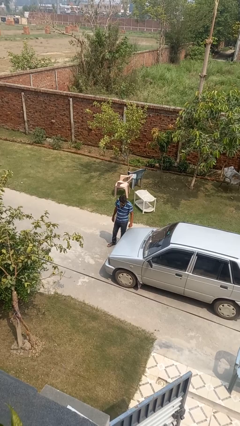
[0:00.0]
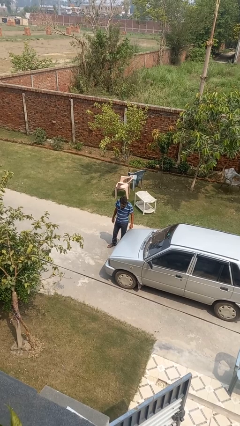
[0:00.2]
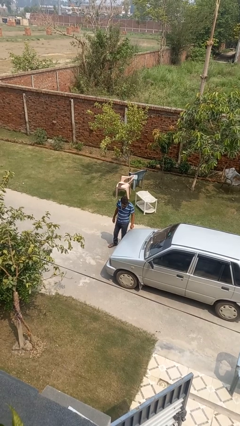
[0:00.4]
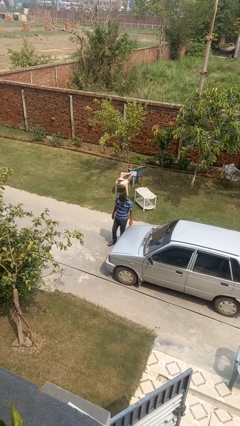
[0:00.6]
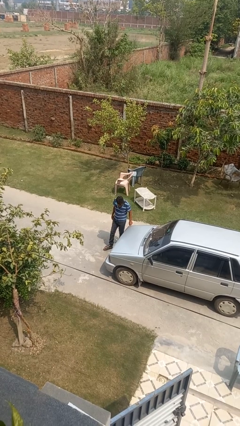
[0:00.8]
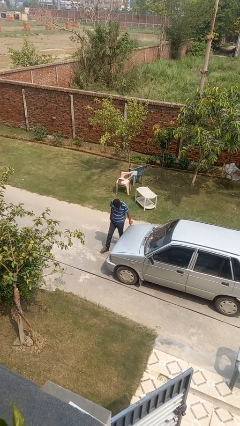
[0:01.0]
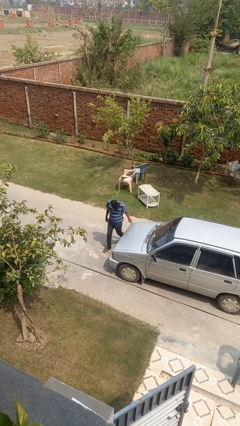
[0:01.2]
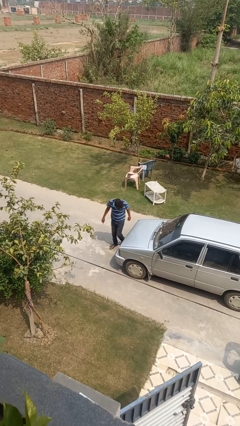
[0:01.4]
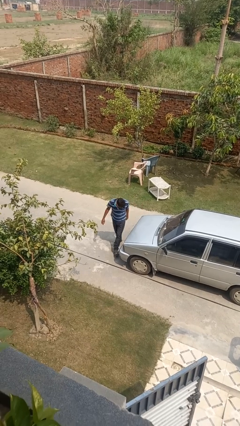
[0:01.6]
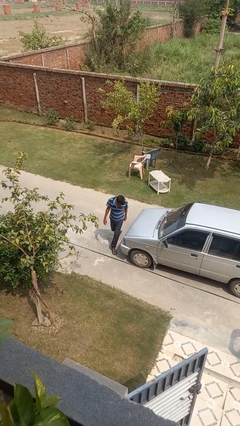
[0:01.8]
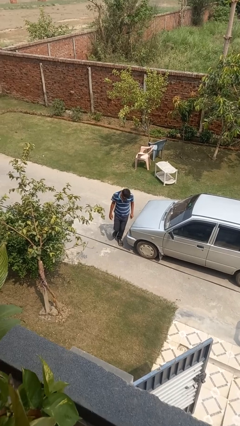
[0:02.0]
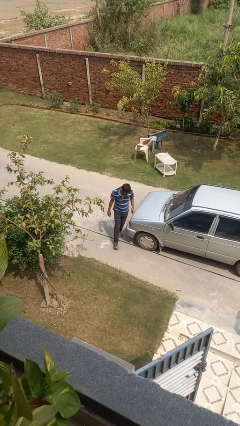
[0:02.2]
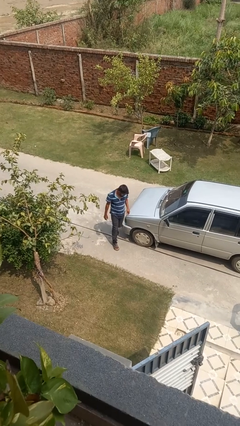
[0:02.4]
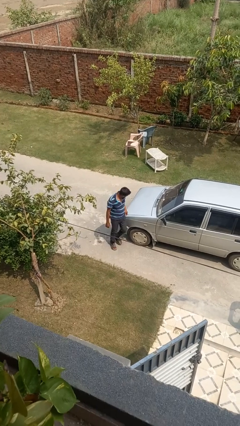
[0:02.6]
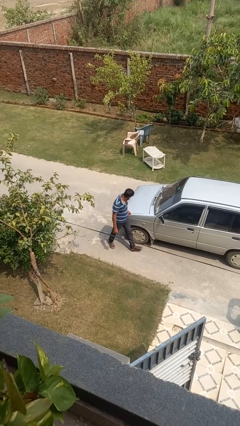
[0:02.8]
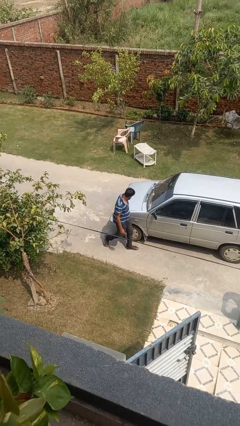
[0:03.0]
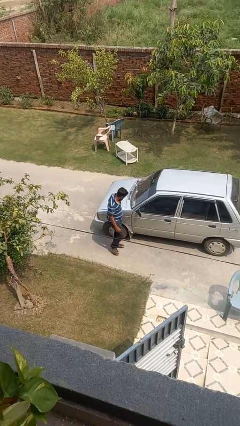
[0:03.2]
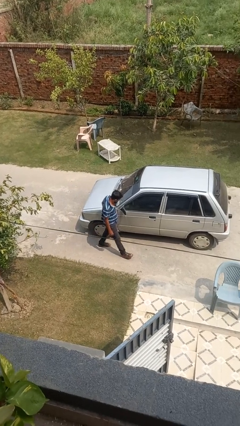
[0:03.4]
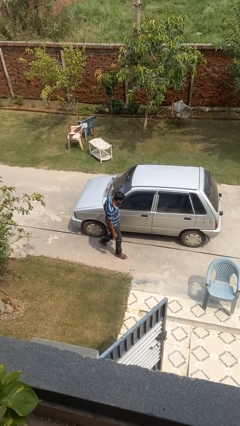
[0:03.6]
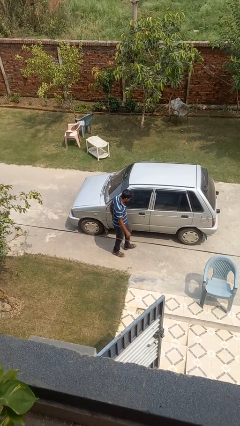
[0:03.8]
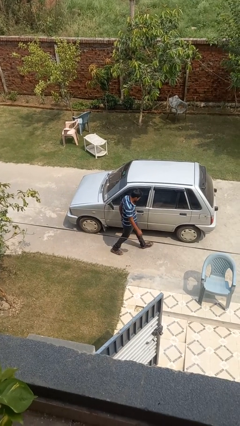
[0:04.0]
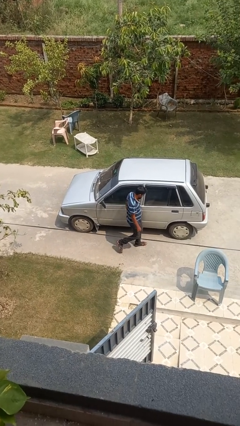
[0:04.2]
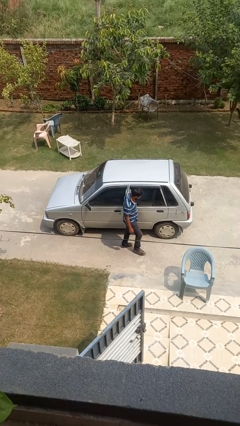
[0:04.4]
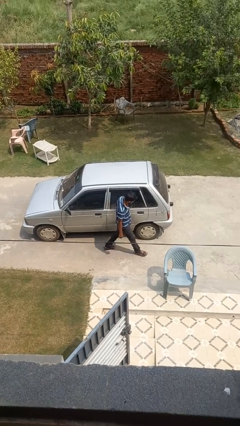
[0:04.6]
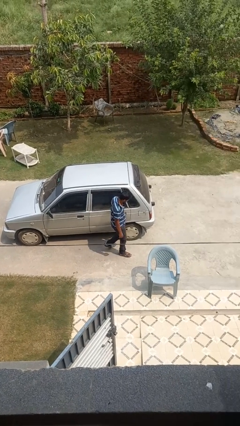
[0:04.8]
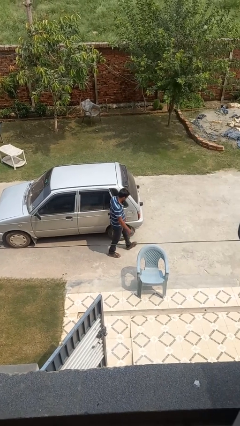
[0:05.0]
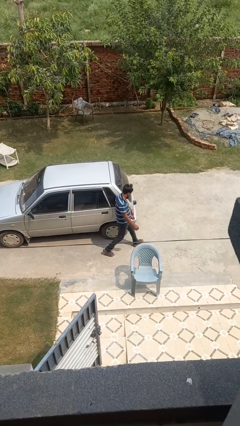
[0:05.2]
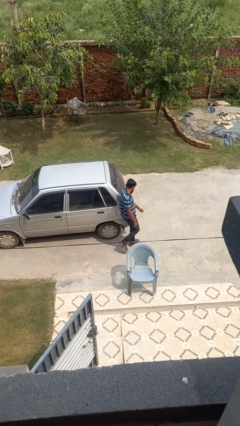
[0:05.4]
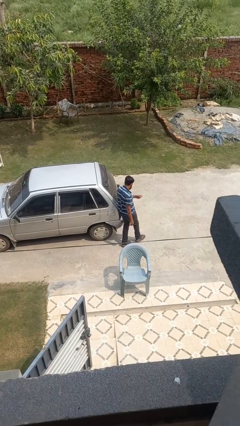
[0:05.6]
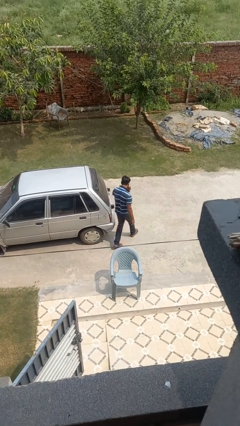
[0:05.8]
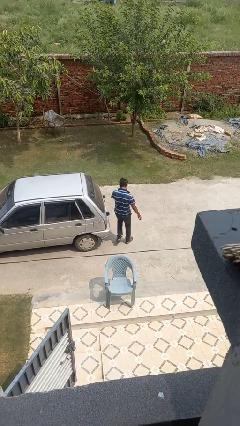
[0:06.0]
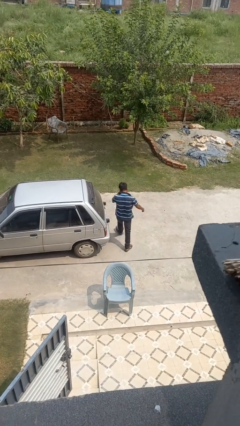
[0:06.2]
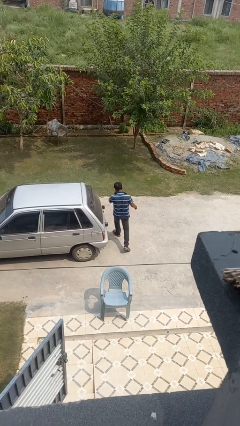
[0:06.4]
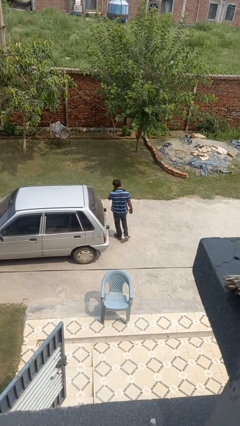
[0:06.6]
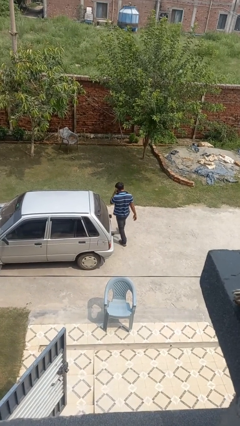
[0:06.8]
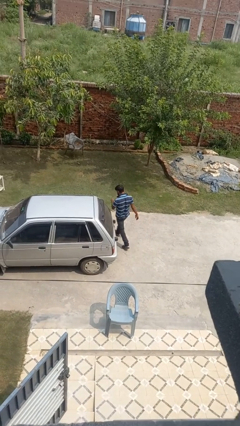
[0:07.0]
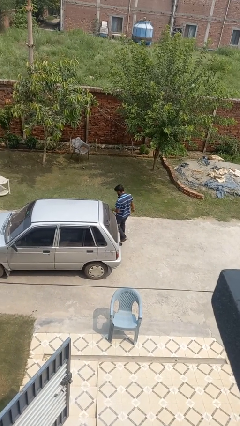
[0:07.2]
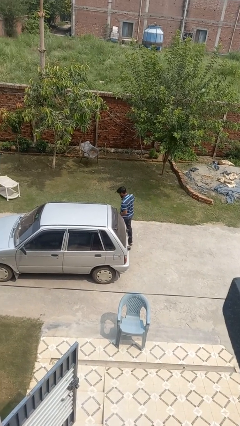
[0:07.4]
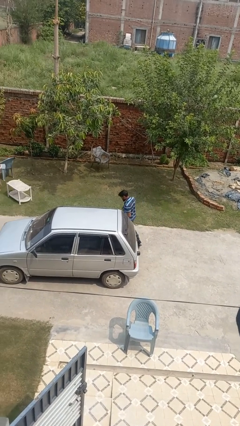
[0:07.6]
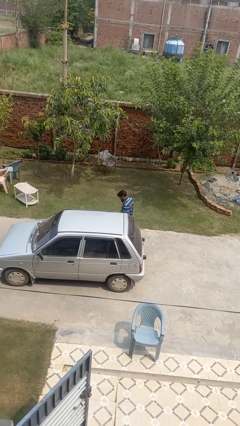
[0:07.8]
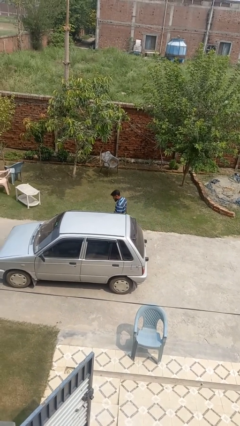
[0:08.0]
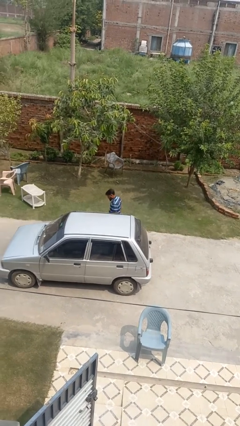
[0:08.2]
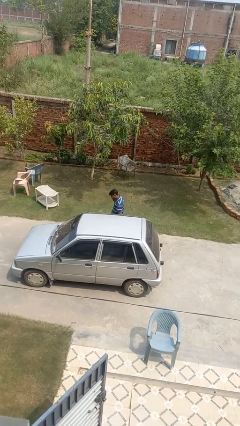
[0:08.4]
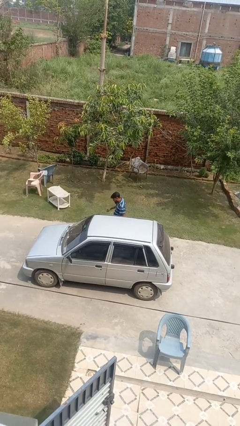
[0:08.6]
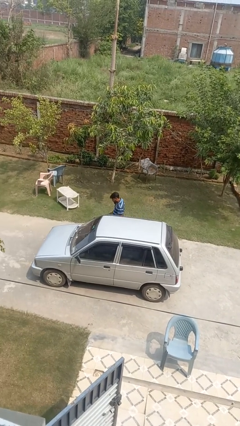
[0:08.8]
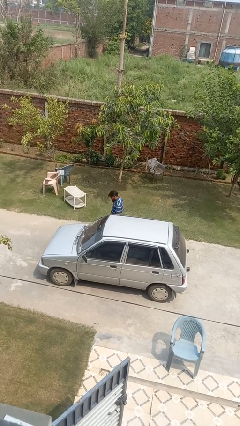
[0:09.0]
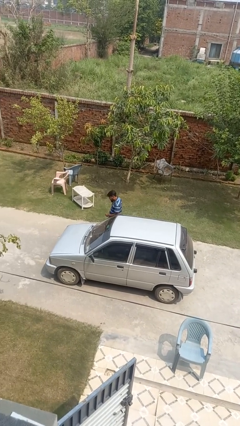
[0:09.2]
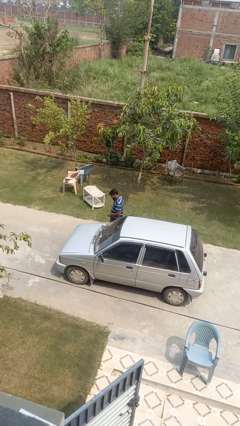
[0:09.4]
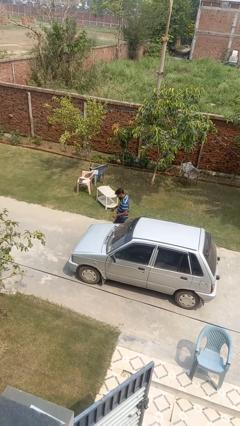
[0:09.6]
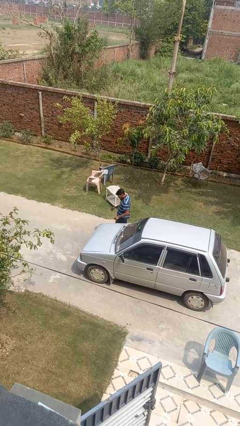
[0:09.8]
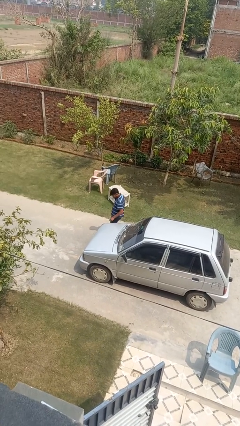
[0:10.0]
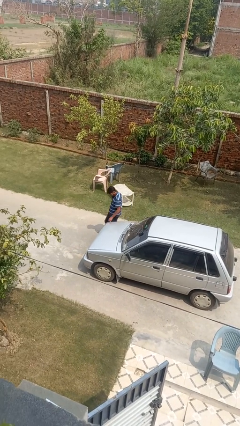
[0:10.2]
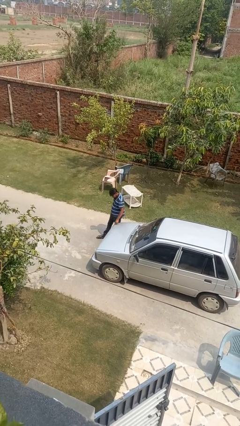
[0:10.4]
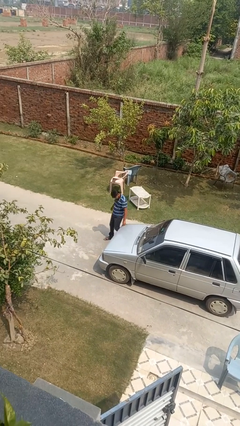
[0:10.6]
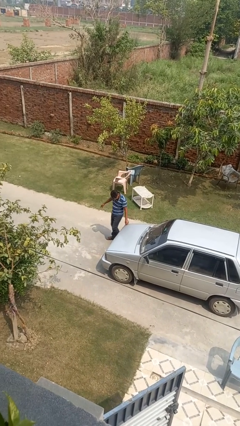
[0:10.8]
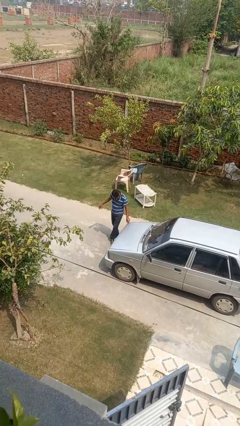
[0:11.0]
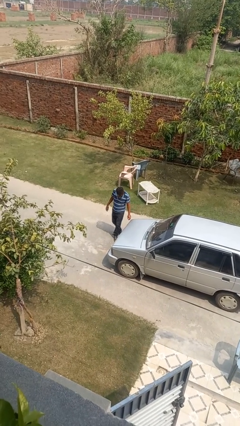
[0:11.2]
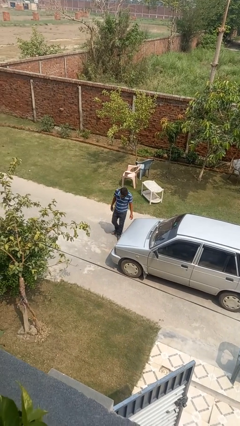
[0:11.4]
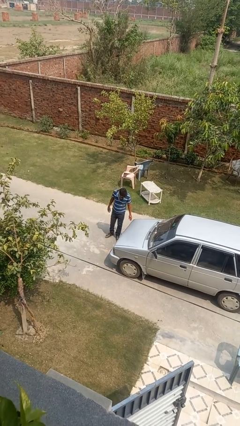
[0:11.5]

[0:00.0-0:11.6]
person walks around car

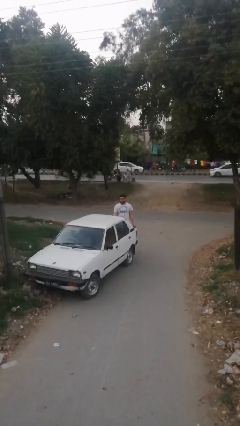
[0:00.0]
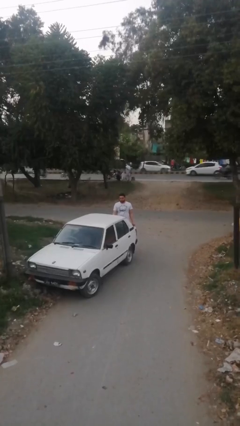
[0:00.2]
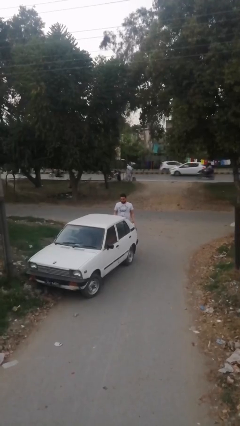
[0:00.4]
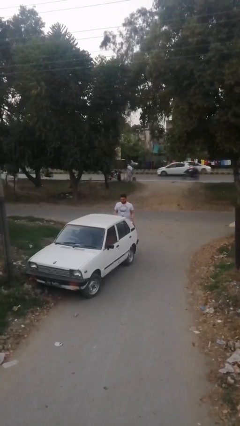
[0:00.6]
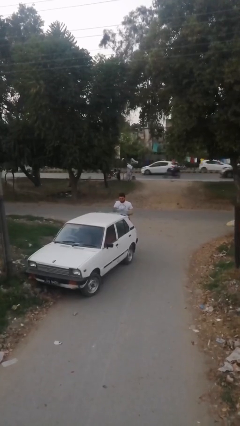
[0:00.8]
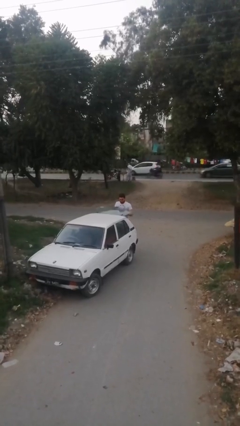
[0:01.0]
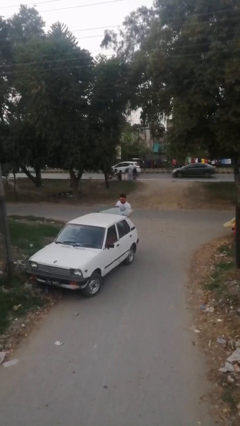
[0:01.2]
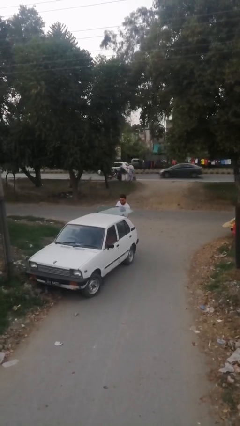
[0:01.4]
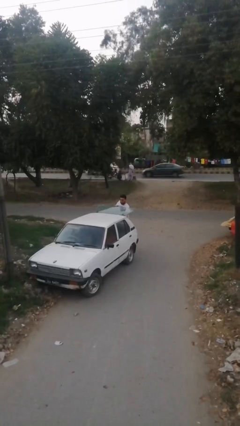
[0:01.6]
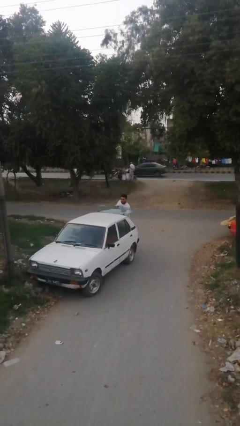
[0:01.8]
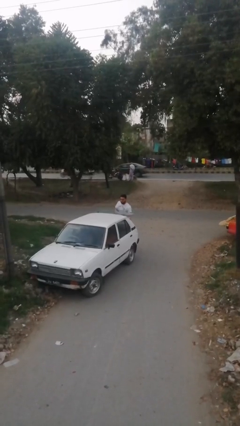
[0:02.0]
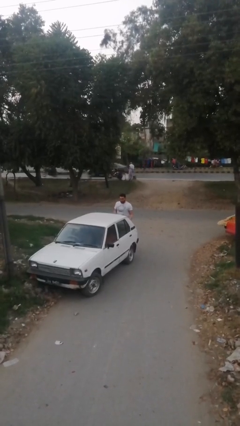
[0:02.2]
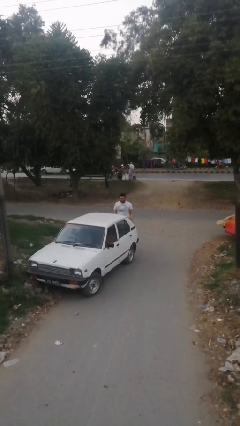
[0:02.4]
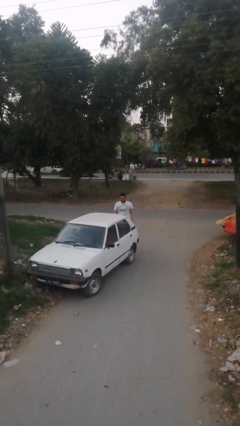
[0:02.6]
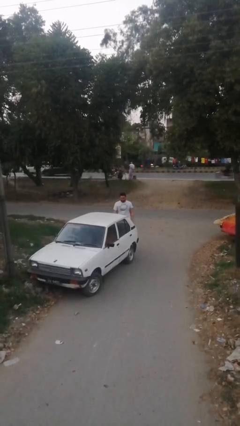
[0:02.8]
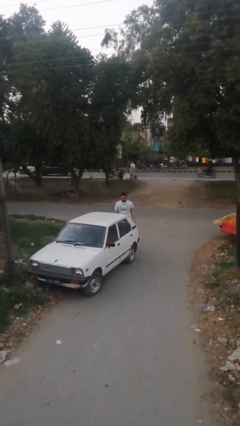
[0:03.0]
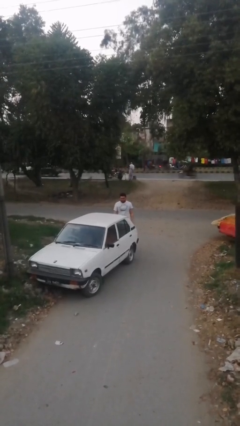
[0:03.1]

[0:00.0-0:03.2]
person loads car

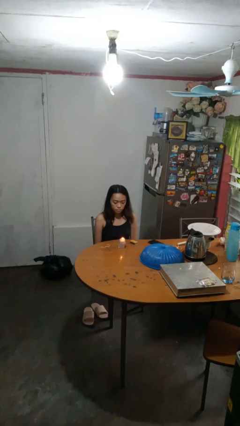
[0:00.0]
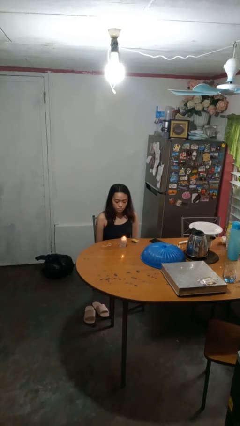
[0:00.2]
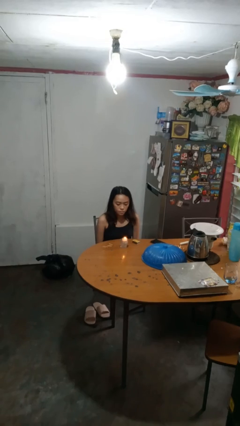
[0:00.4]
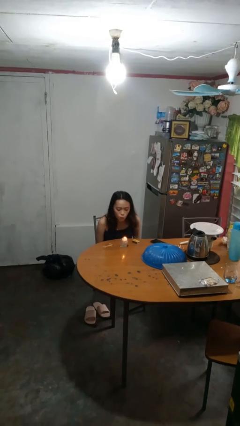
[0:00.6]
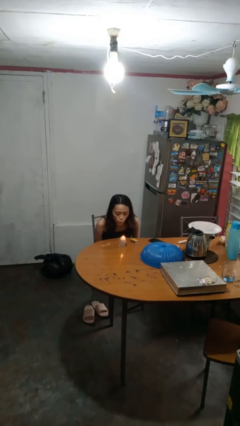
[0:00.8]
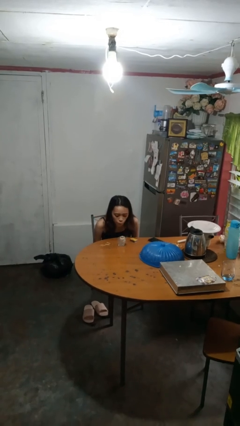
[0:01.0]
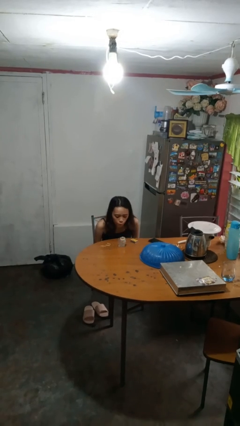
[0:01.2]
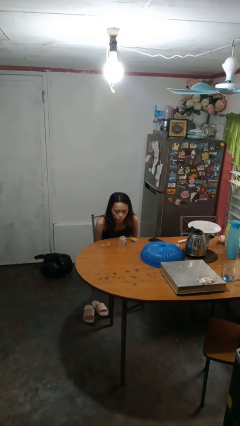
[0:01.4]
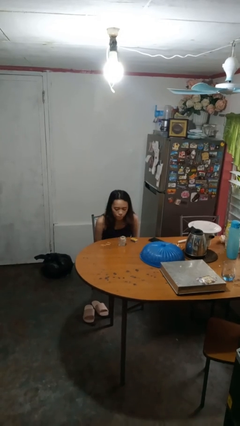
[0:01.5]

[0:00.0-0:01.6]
person extinguishes candle

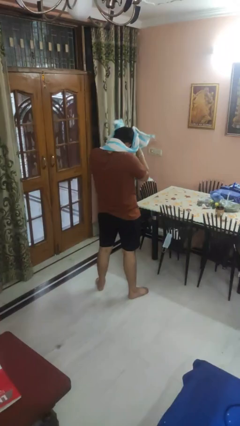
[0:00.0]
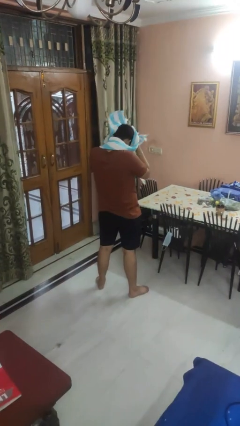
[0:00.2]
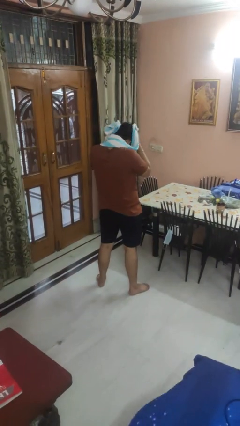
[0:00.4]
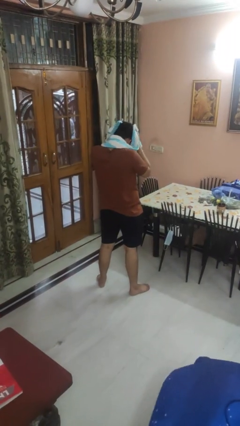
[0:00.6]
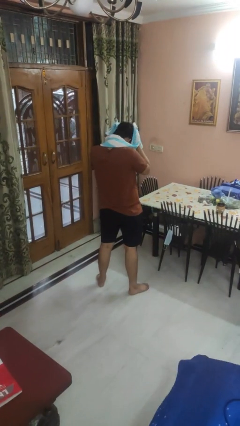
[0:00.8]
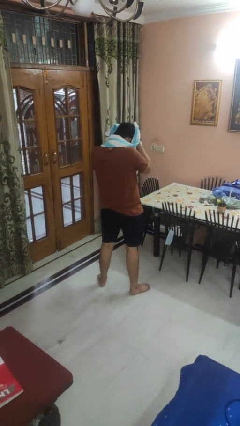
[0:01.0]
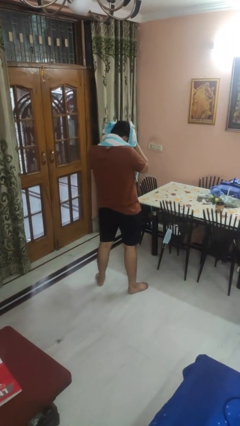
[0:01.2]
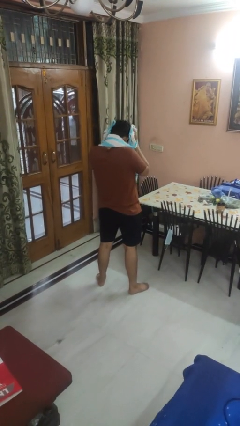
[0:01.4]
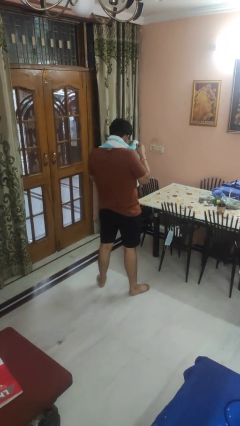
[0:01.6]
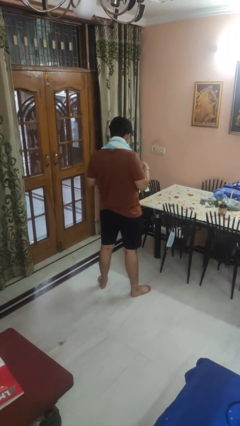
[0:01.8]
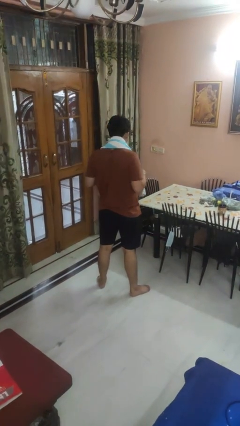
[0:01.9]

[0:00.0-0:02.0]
person dries hair with towel
